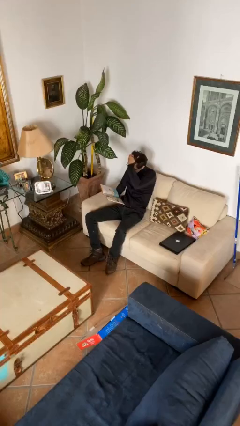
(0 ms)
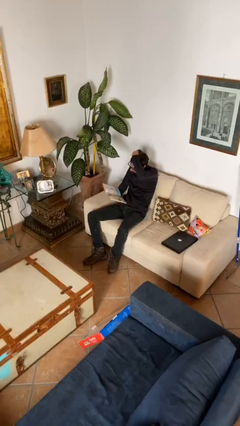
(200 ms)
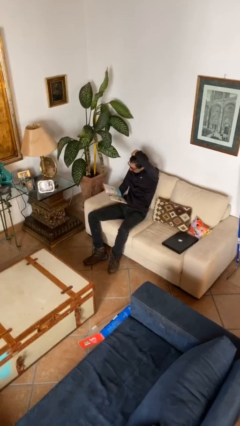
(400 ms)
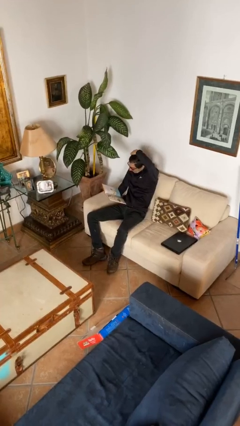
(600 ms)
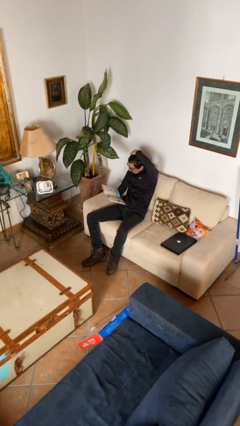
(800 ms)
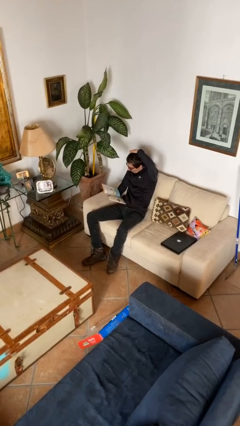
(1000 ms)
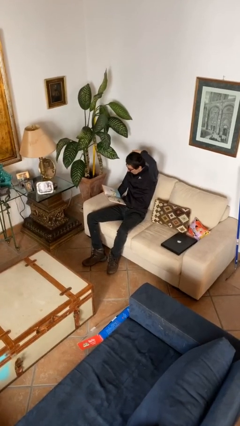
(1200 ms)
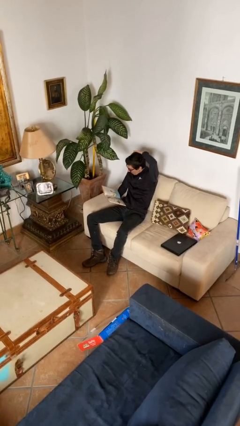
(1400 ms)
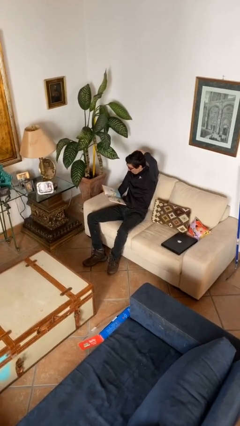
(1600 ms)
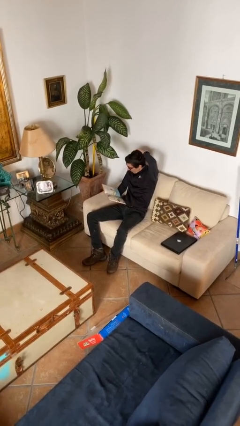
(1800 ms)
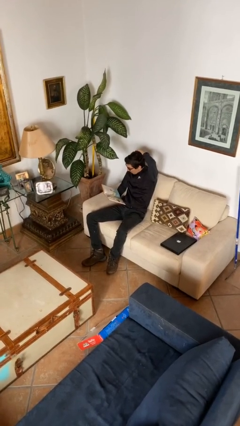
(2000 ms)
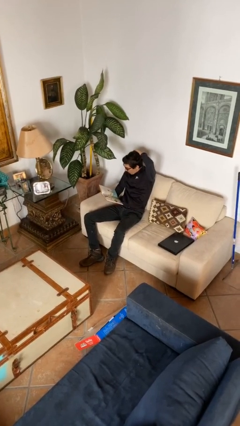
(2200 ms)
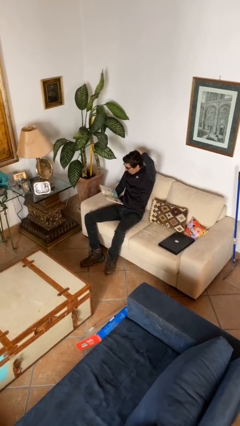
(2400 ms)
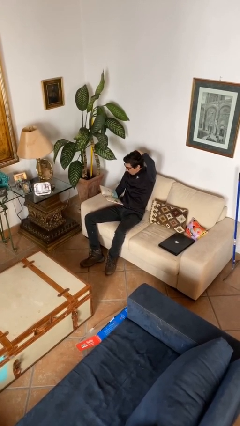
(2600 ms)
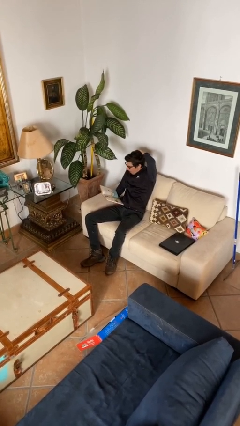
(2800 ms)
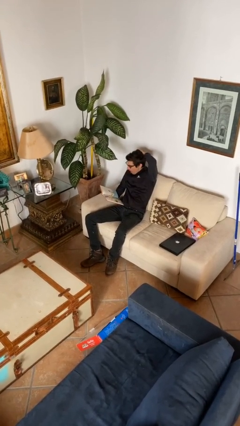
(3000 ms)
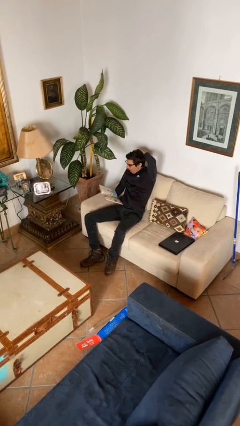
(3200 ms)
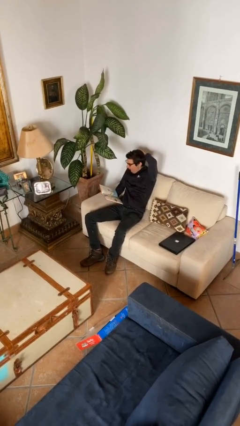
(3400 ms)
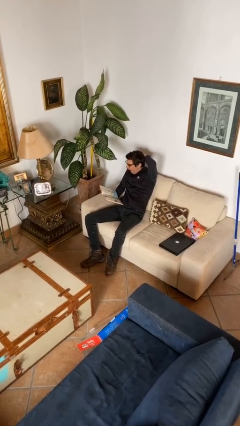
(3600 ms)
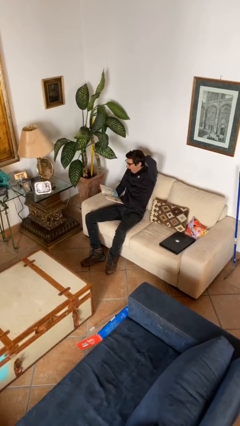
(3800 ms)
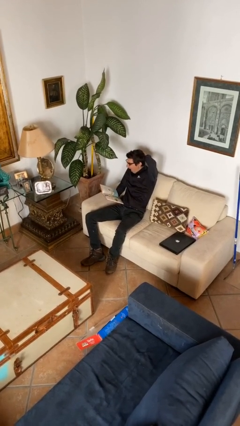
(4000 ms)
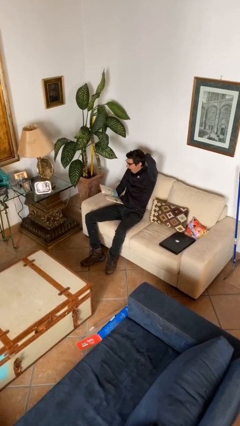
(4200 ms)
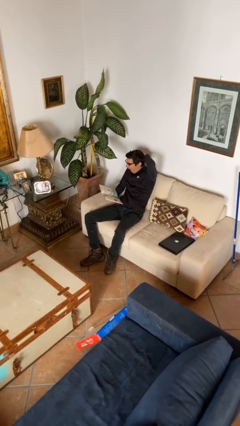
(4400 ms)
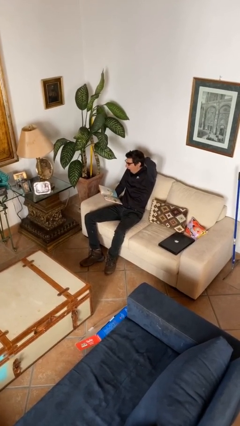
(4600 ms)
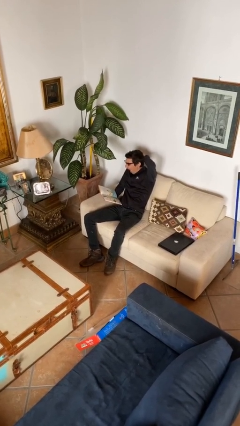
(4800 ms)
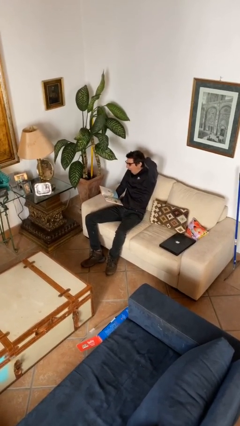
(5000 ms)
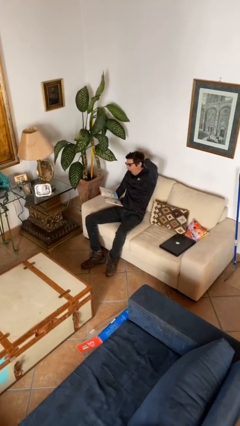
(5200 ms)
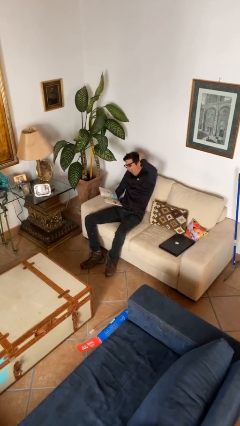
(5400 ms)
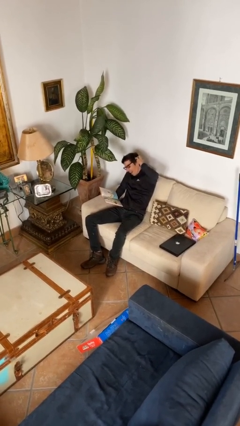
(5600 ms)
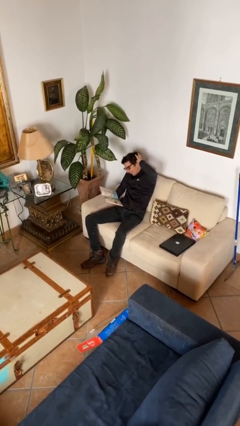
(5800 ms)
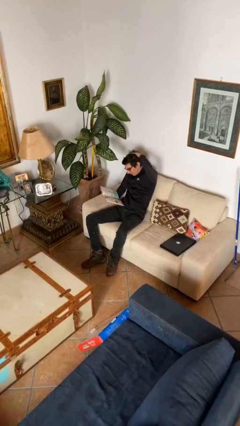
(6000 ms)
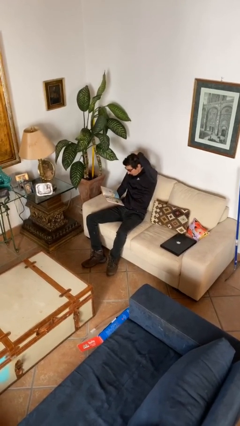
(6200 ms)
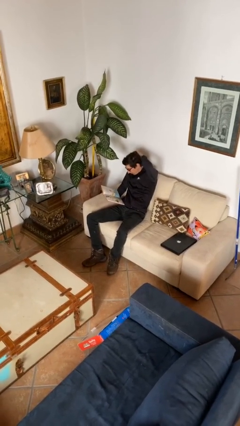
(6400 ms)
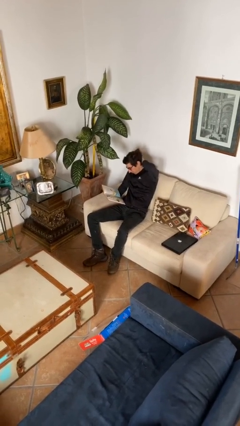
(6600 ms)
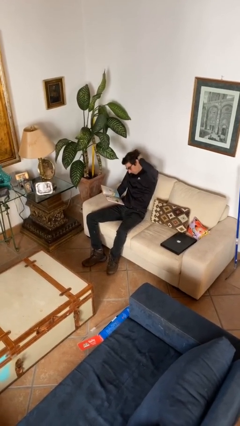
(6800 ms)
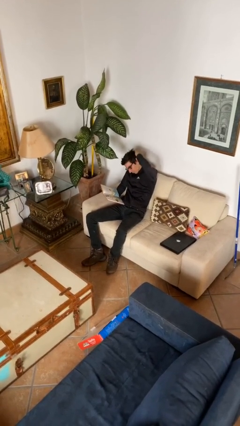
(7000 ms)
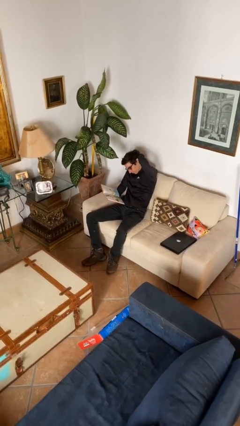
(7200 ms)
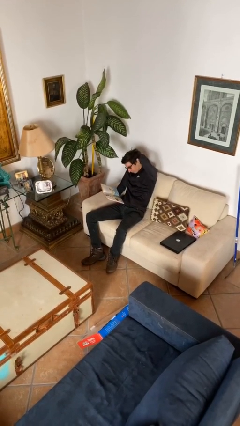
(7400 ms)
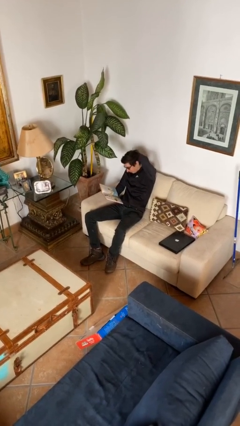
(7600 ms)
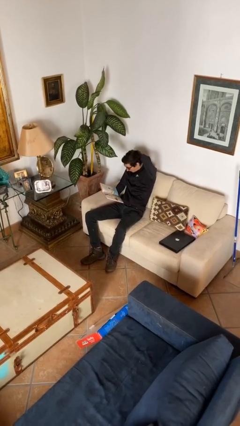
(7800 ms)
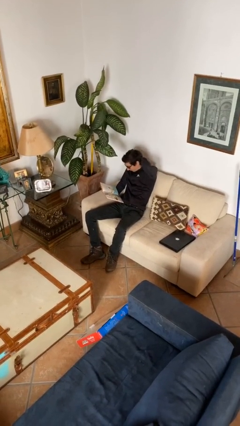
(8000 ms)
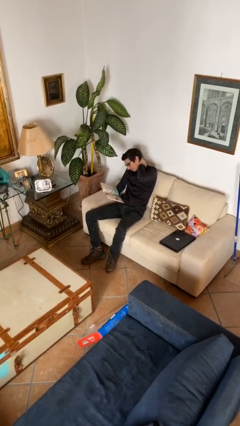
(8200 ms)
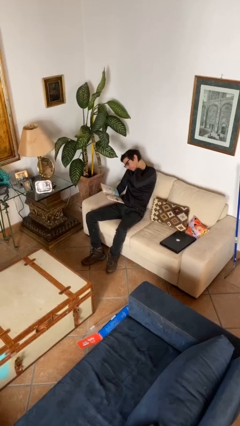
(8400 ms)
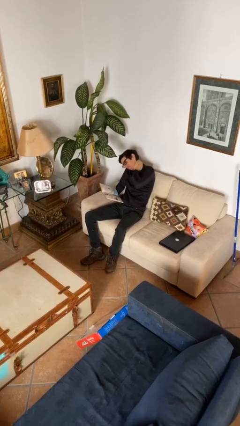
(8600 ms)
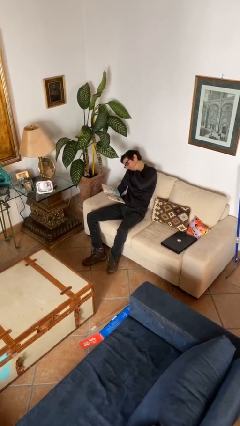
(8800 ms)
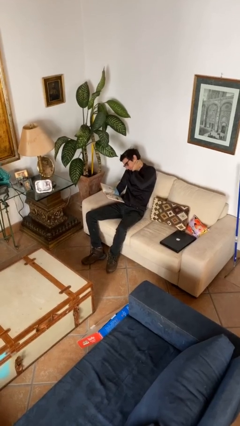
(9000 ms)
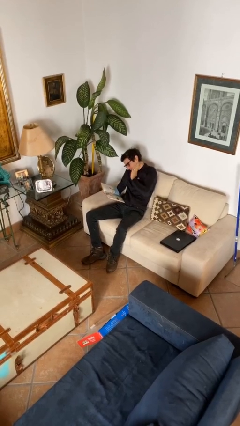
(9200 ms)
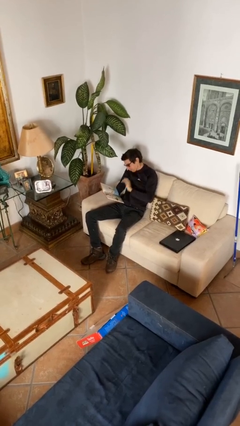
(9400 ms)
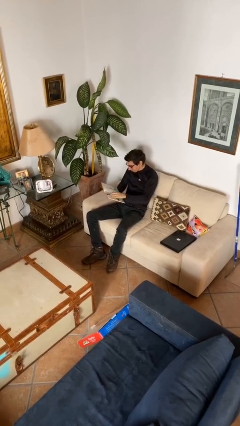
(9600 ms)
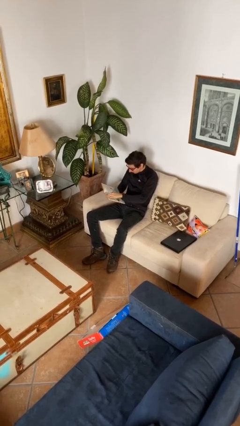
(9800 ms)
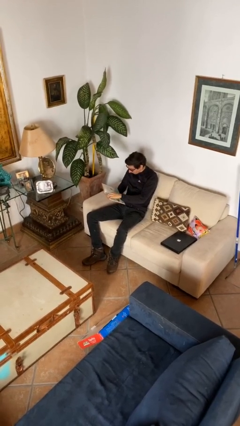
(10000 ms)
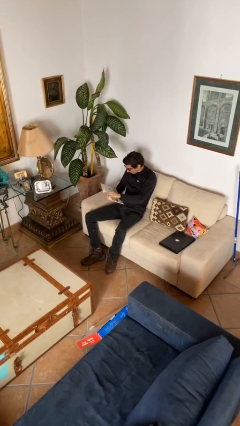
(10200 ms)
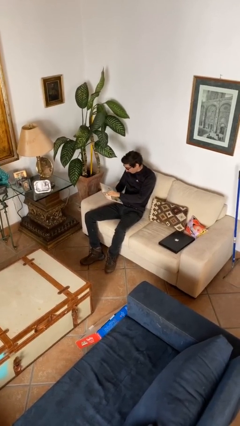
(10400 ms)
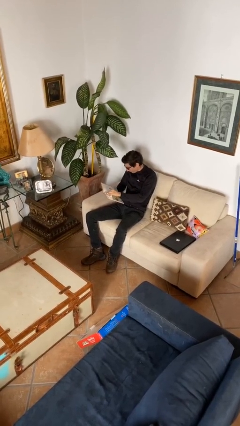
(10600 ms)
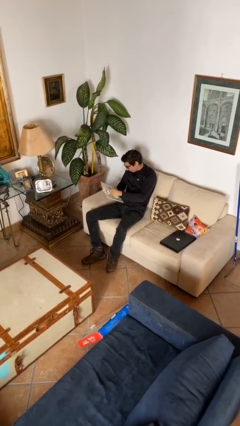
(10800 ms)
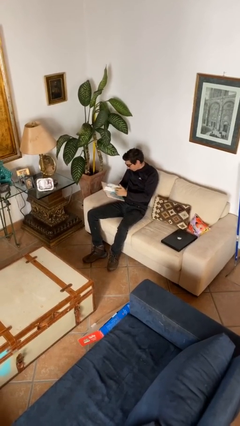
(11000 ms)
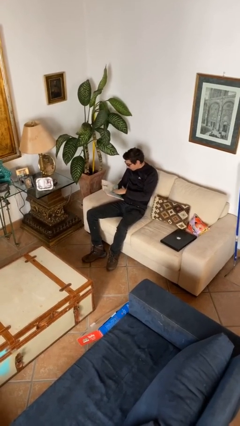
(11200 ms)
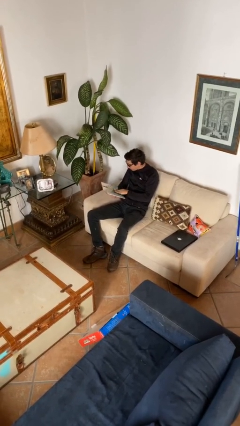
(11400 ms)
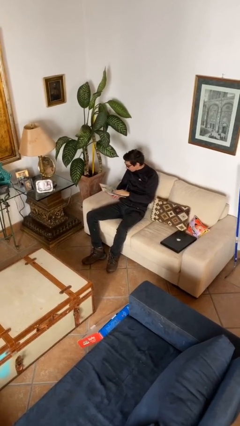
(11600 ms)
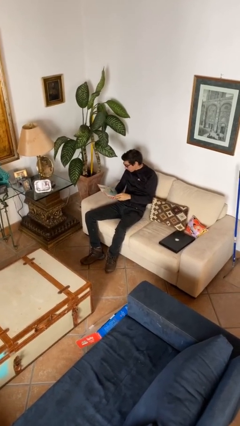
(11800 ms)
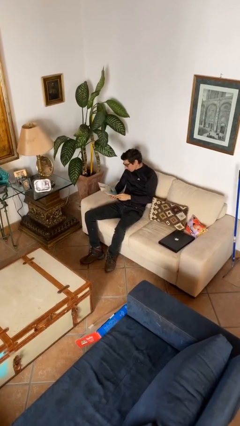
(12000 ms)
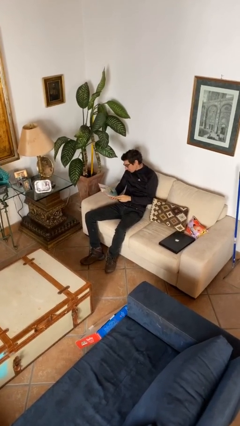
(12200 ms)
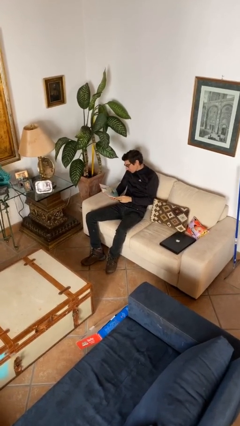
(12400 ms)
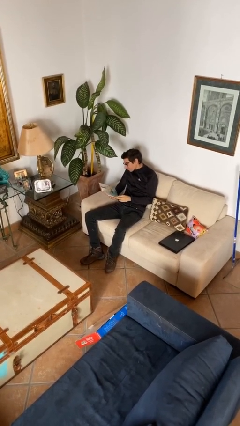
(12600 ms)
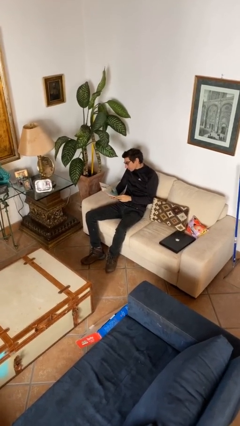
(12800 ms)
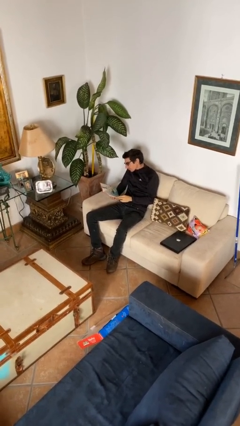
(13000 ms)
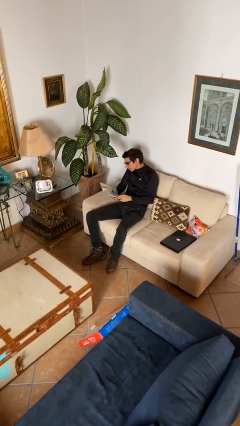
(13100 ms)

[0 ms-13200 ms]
person reads document

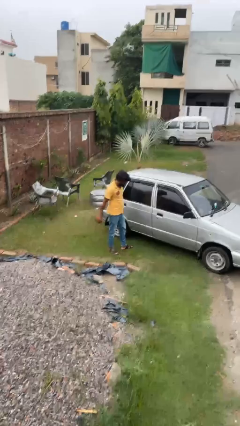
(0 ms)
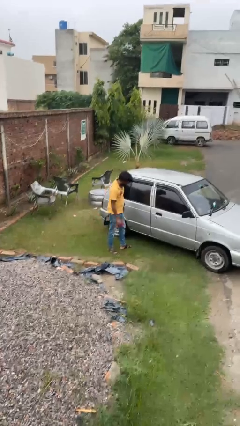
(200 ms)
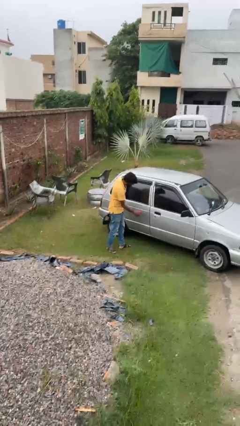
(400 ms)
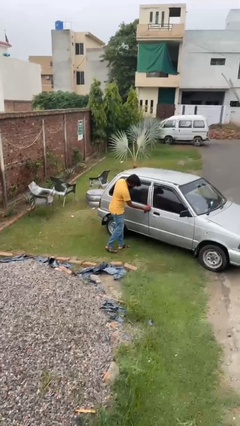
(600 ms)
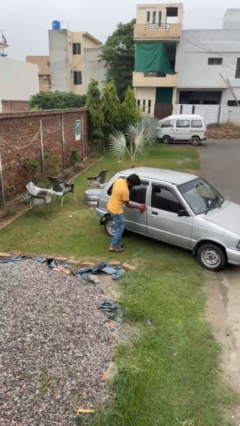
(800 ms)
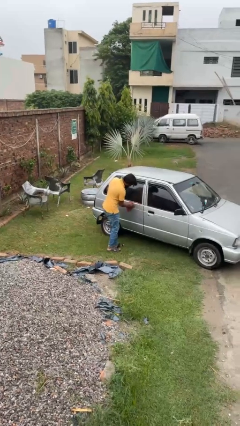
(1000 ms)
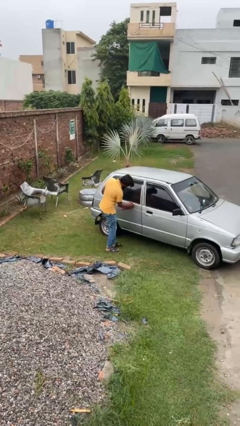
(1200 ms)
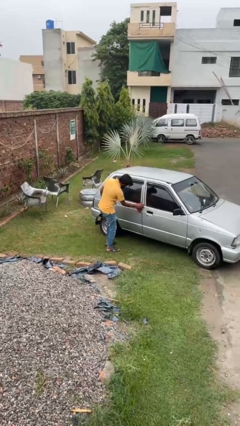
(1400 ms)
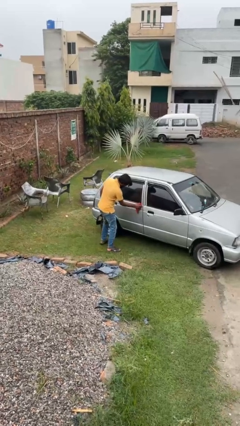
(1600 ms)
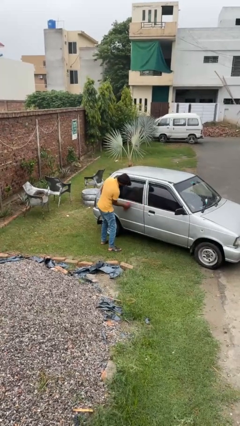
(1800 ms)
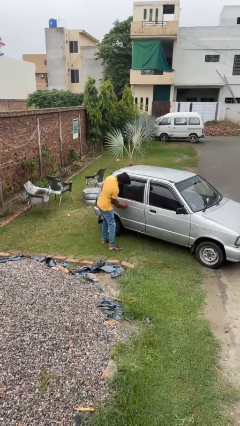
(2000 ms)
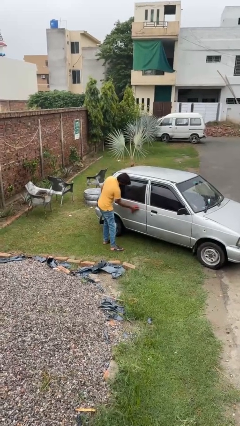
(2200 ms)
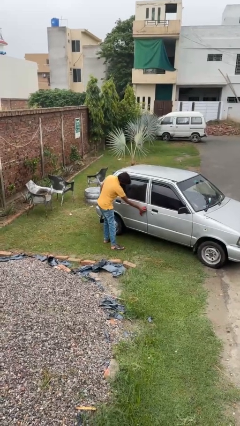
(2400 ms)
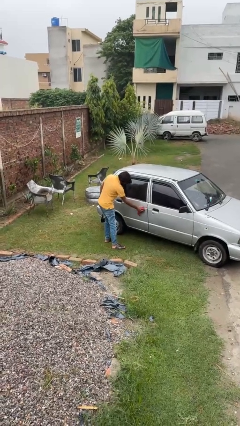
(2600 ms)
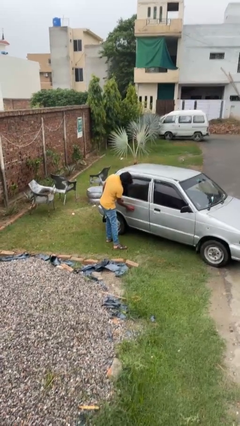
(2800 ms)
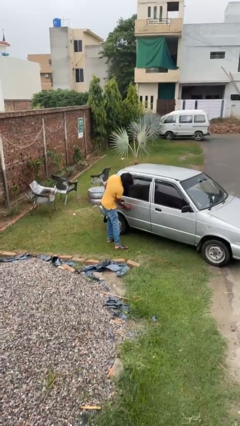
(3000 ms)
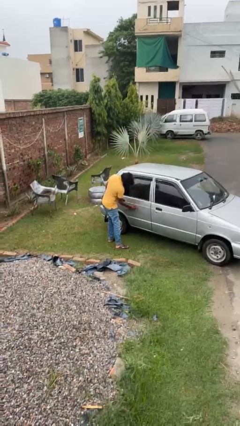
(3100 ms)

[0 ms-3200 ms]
person polishes car with rag

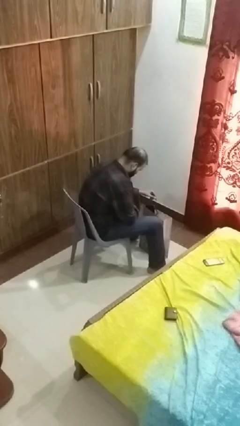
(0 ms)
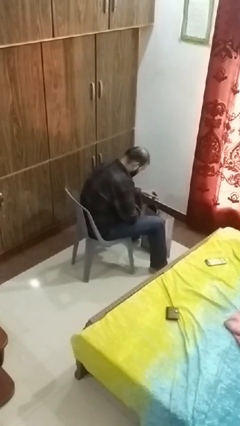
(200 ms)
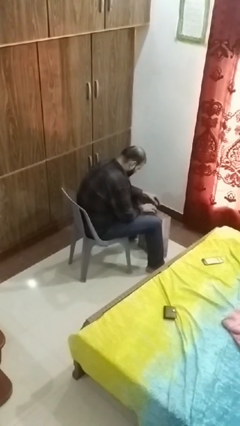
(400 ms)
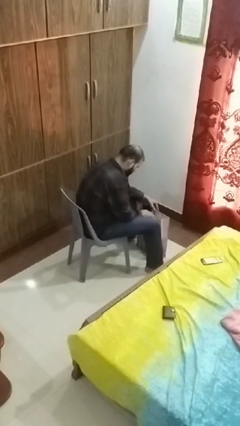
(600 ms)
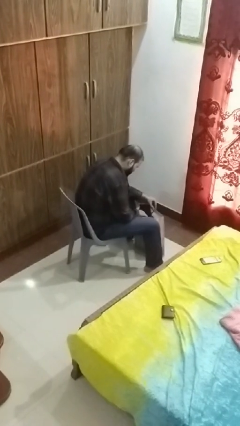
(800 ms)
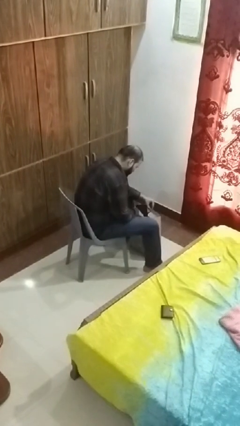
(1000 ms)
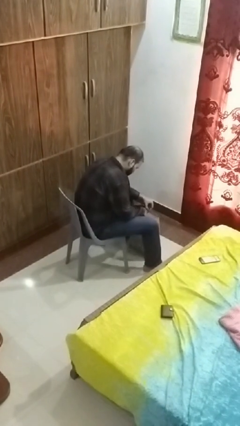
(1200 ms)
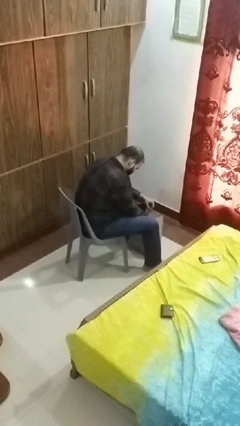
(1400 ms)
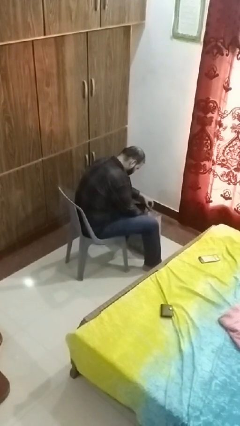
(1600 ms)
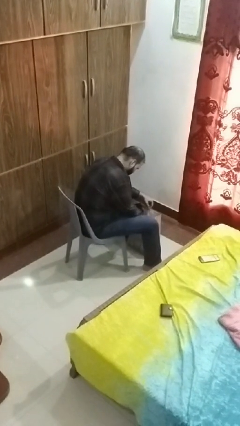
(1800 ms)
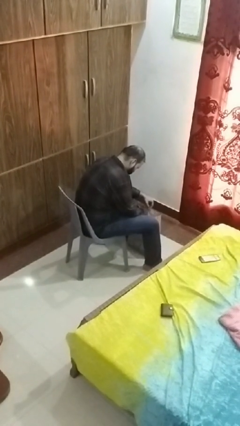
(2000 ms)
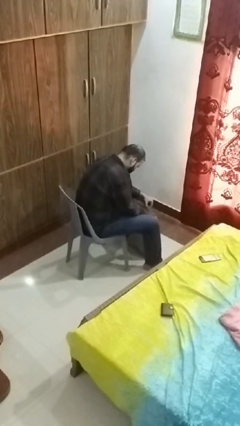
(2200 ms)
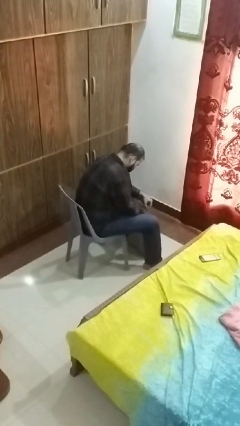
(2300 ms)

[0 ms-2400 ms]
person searches in bag
